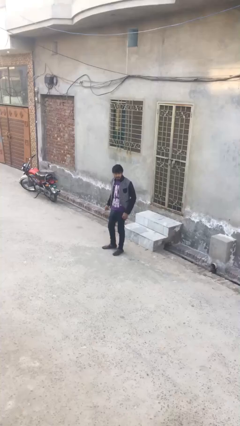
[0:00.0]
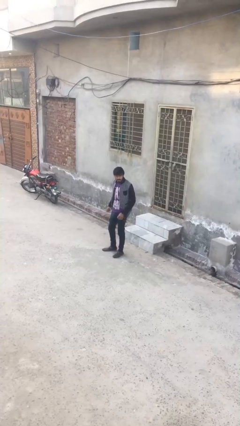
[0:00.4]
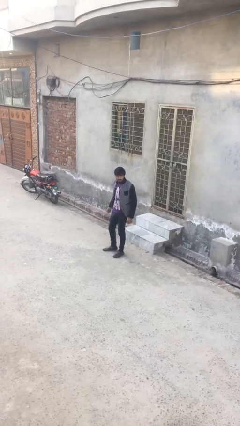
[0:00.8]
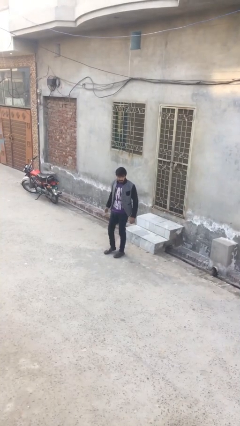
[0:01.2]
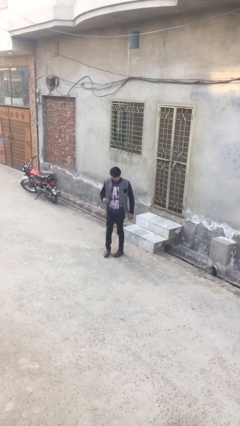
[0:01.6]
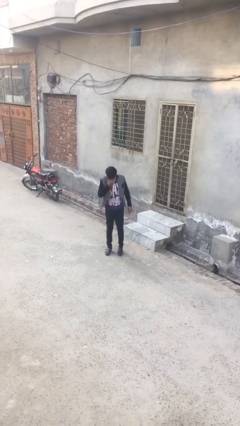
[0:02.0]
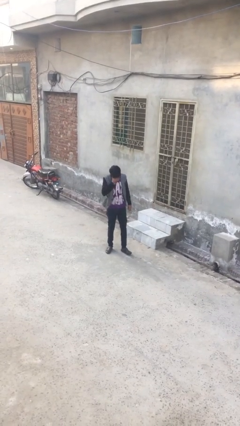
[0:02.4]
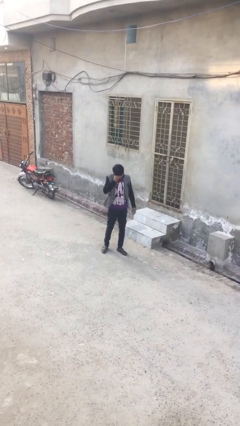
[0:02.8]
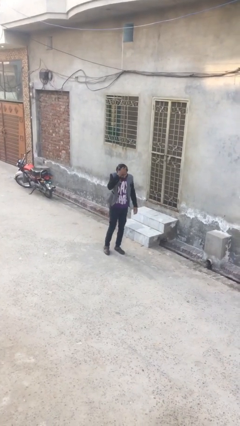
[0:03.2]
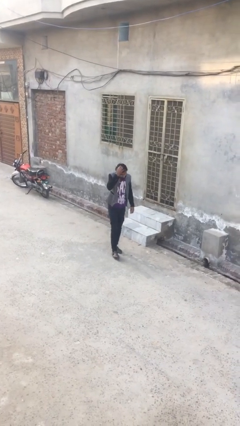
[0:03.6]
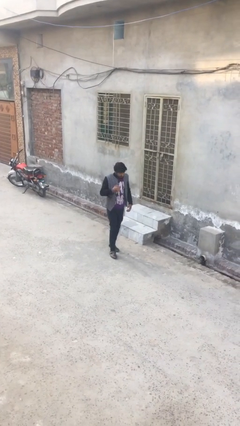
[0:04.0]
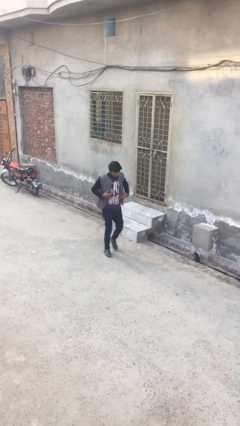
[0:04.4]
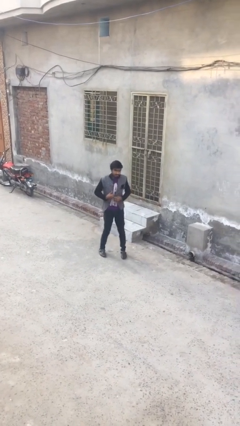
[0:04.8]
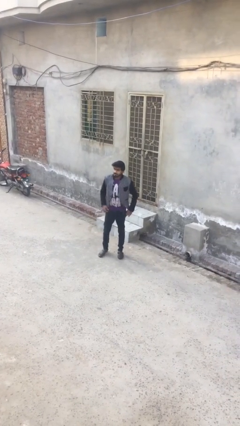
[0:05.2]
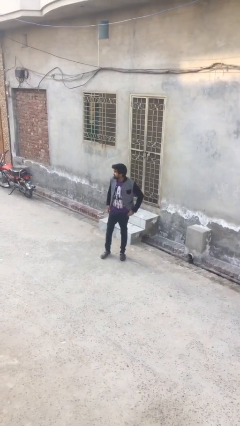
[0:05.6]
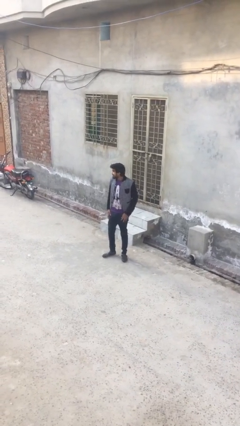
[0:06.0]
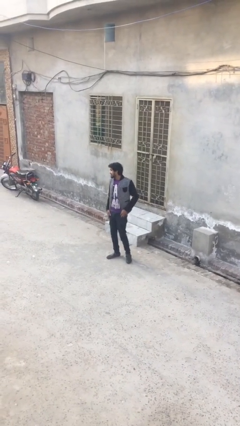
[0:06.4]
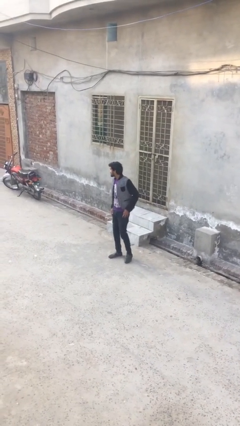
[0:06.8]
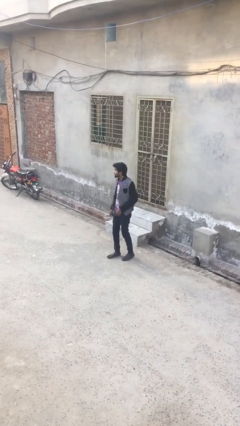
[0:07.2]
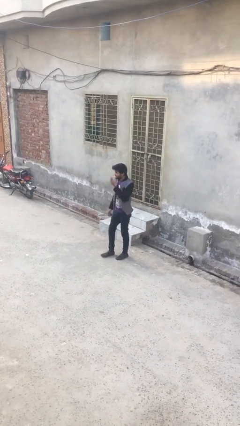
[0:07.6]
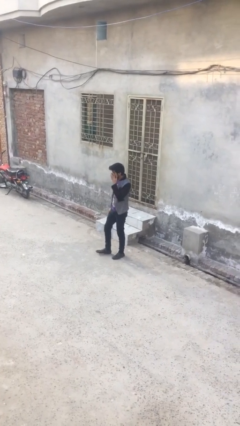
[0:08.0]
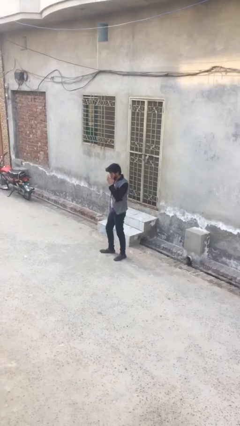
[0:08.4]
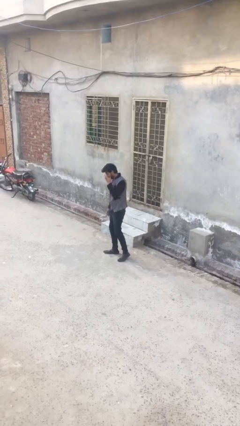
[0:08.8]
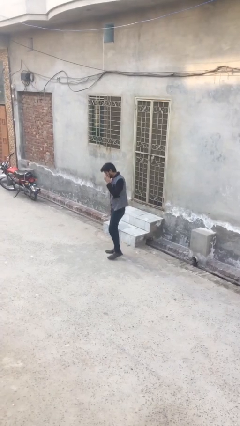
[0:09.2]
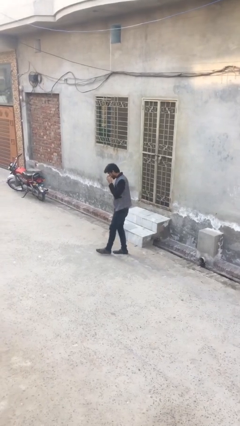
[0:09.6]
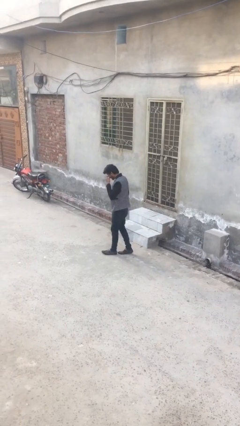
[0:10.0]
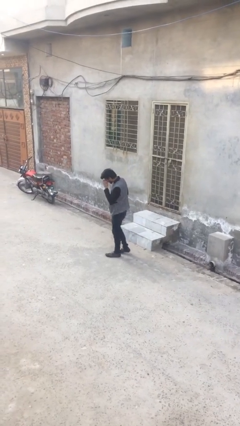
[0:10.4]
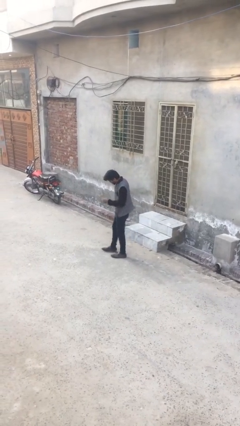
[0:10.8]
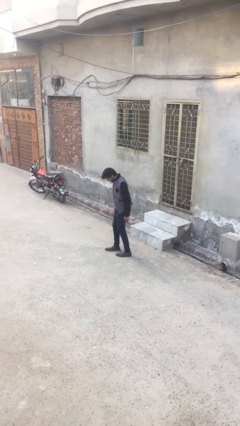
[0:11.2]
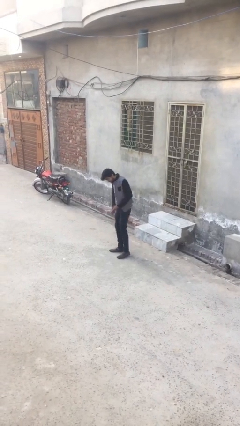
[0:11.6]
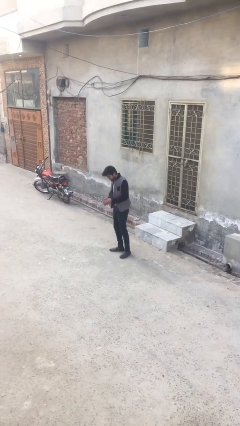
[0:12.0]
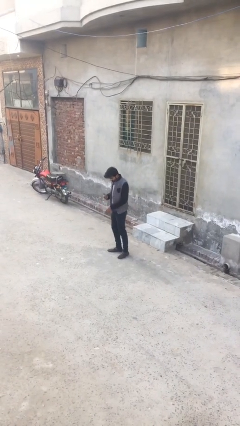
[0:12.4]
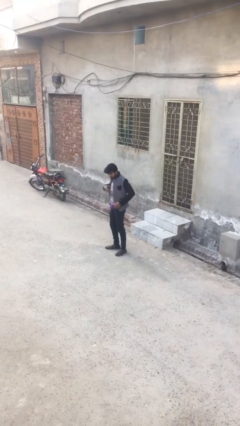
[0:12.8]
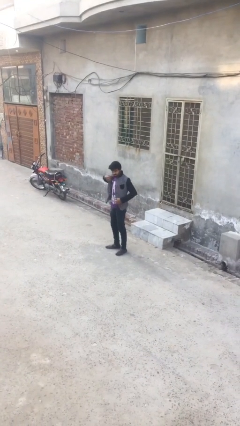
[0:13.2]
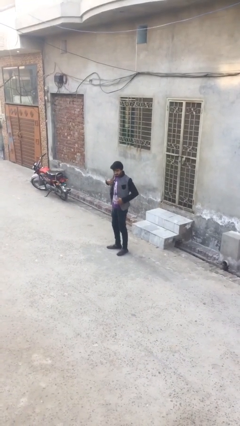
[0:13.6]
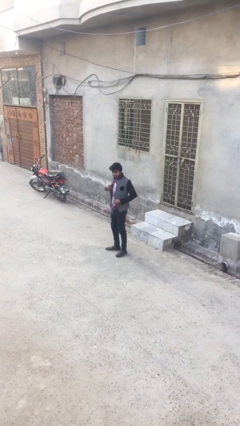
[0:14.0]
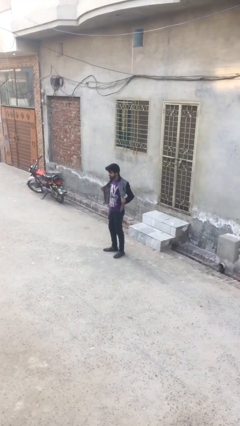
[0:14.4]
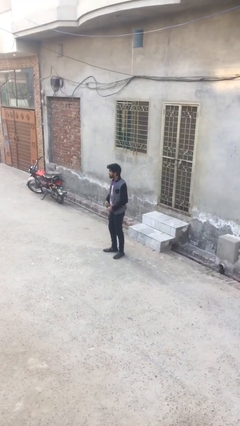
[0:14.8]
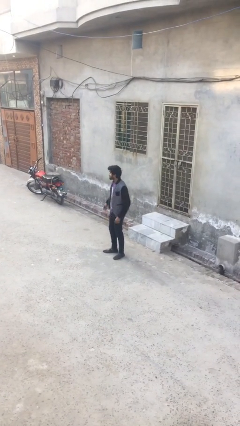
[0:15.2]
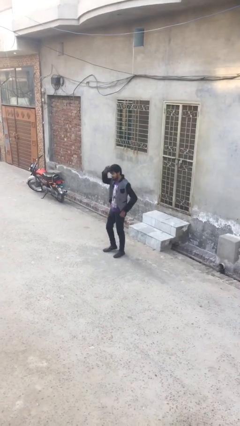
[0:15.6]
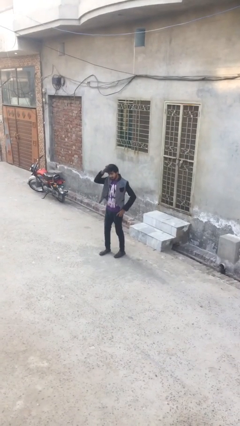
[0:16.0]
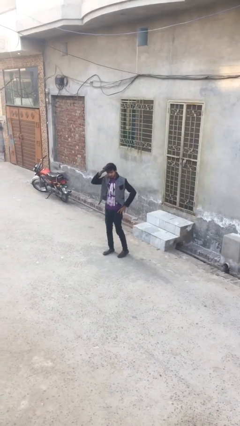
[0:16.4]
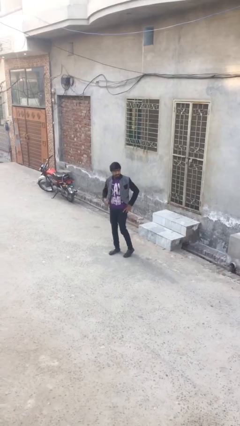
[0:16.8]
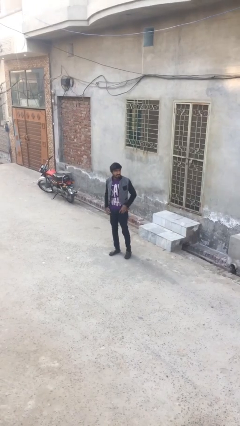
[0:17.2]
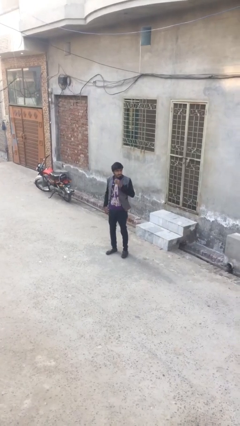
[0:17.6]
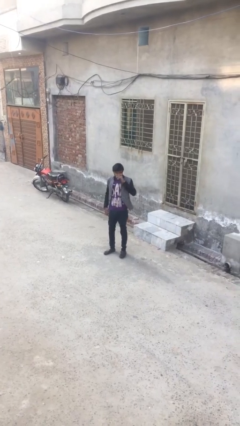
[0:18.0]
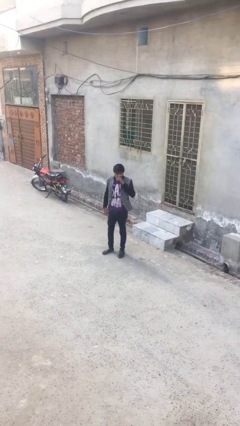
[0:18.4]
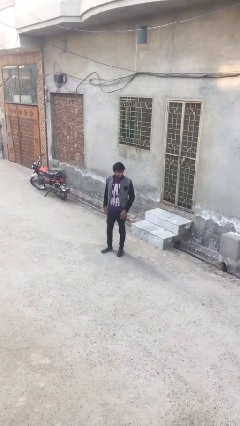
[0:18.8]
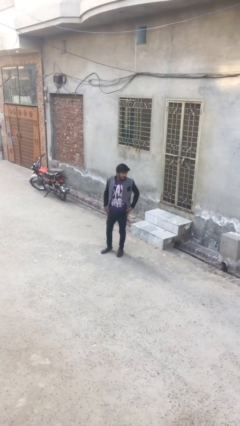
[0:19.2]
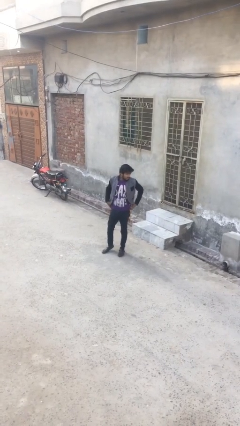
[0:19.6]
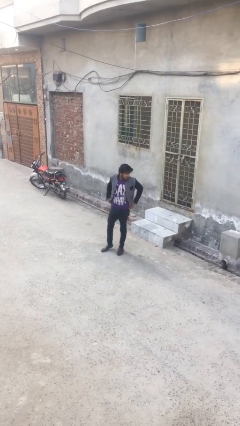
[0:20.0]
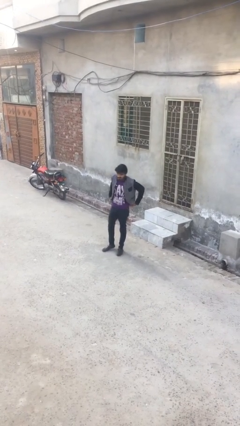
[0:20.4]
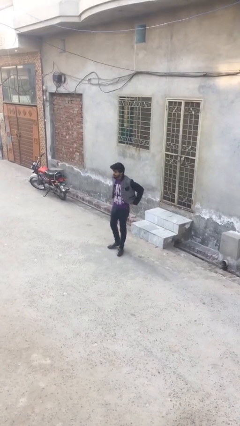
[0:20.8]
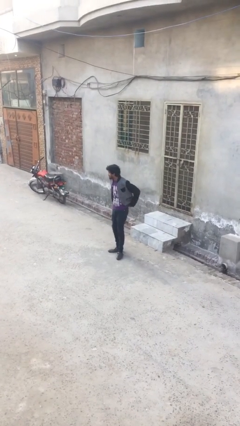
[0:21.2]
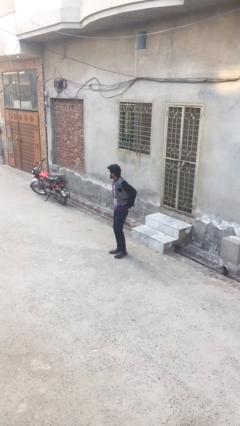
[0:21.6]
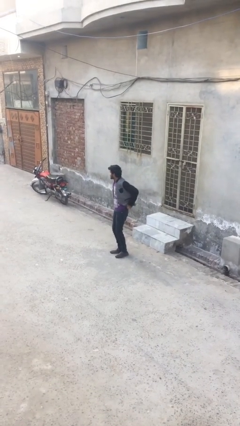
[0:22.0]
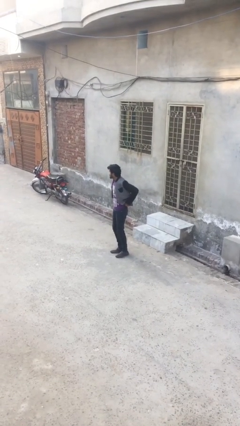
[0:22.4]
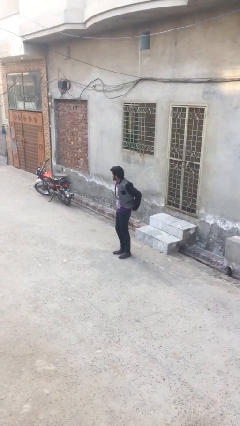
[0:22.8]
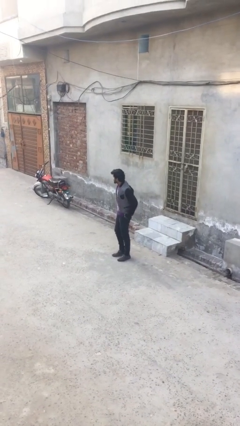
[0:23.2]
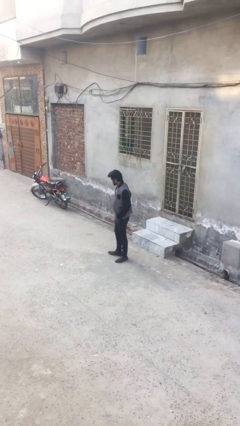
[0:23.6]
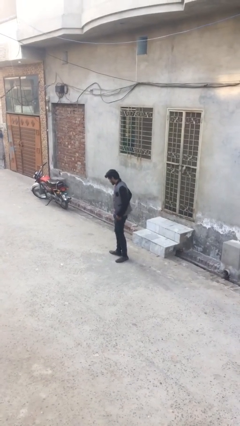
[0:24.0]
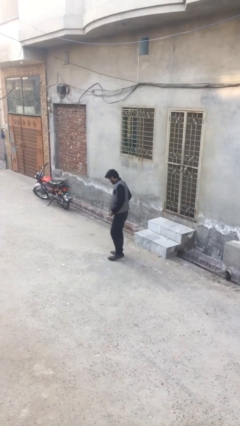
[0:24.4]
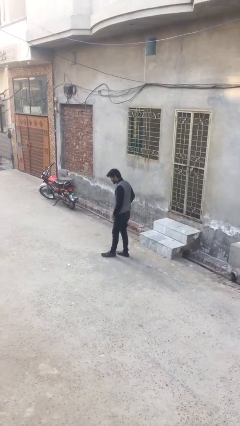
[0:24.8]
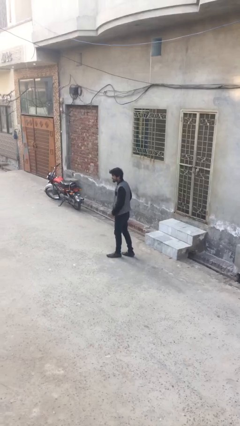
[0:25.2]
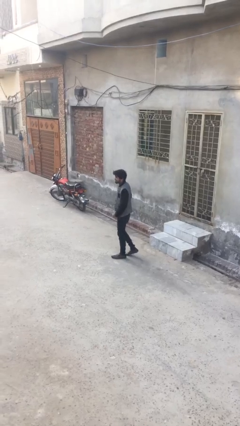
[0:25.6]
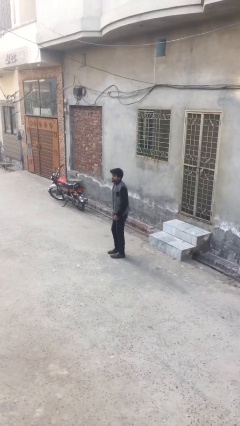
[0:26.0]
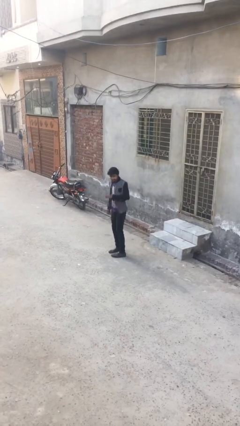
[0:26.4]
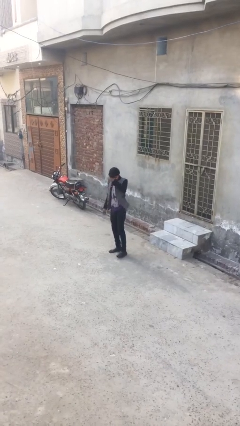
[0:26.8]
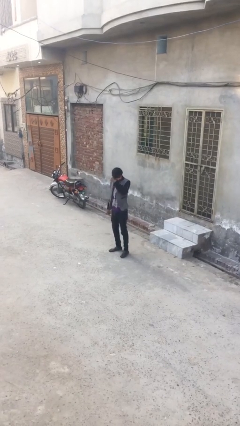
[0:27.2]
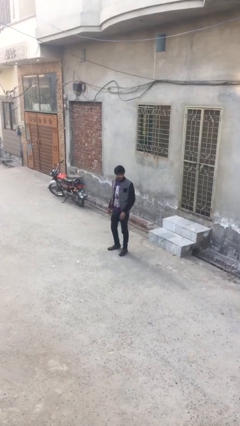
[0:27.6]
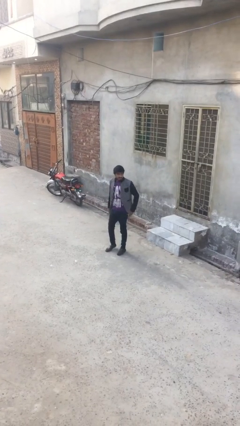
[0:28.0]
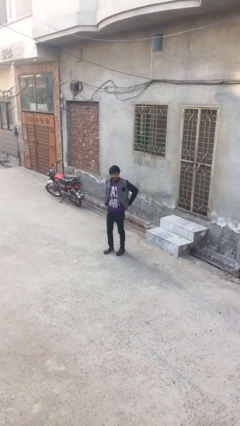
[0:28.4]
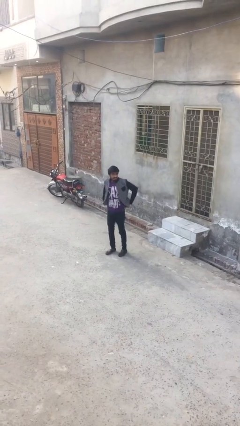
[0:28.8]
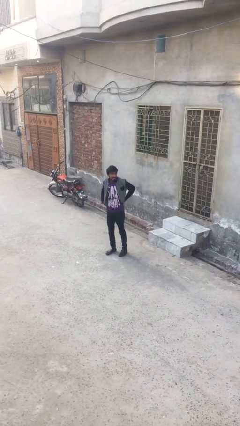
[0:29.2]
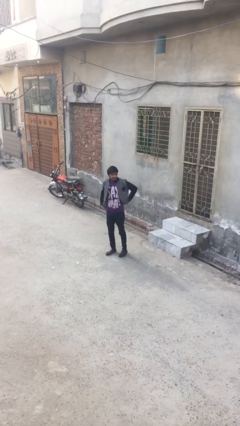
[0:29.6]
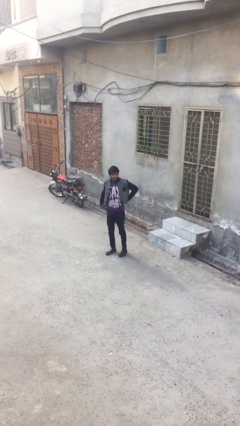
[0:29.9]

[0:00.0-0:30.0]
person walks

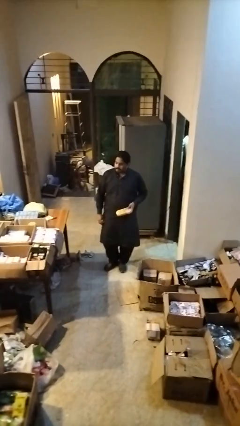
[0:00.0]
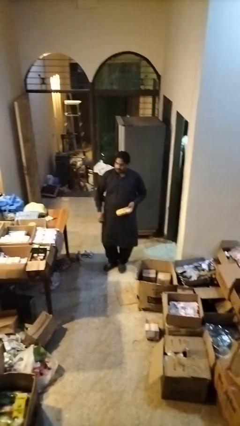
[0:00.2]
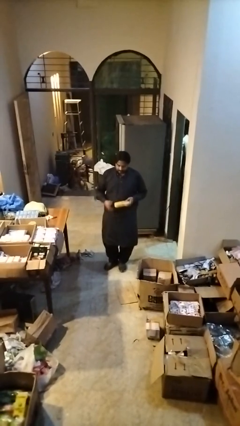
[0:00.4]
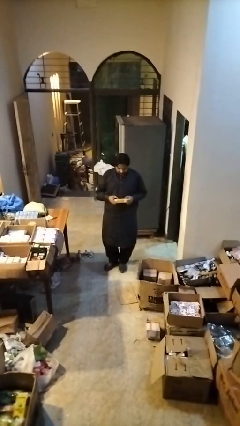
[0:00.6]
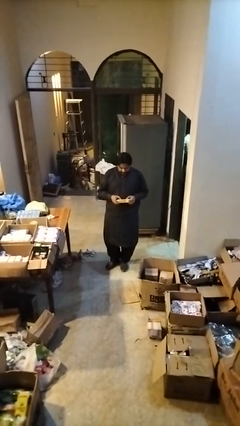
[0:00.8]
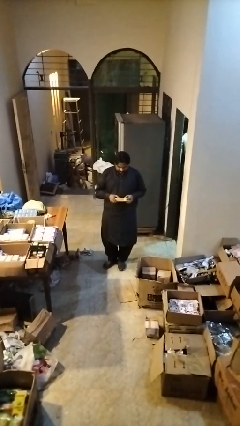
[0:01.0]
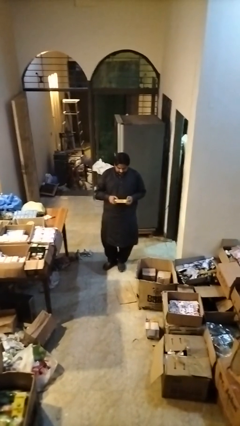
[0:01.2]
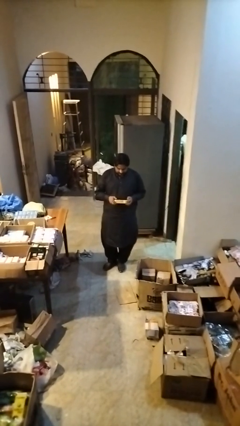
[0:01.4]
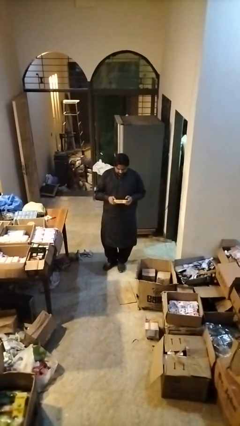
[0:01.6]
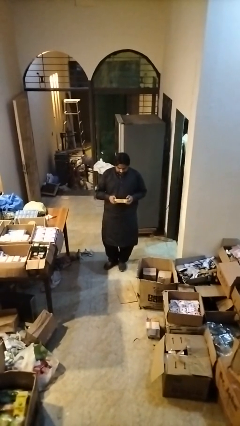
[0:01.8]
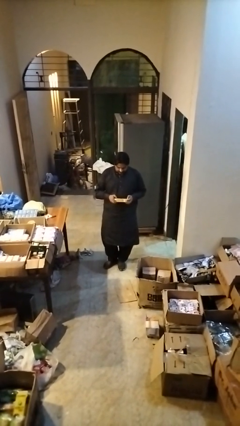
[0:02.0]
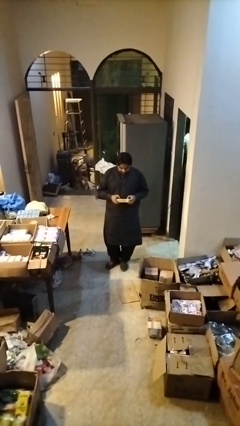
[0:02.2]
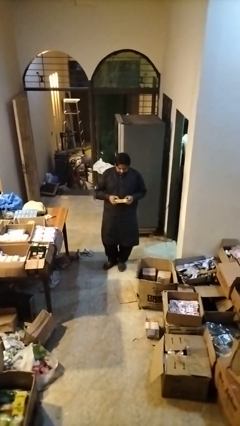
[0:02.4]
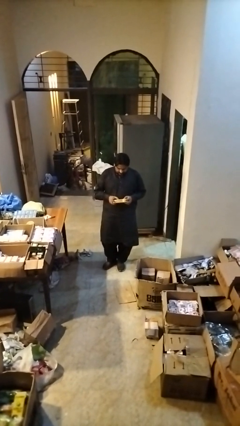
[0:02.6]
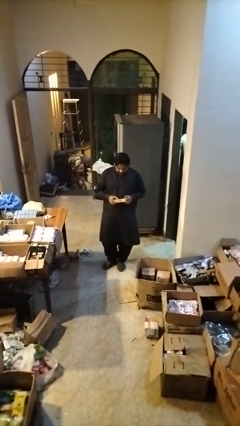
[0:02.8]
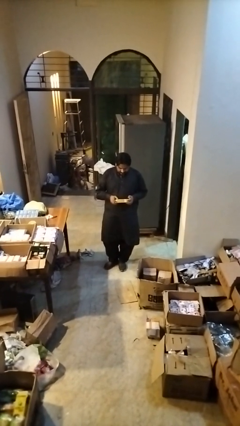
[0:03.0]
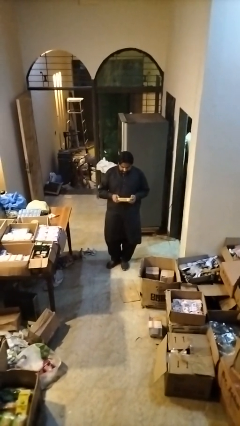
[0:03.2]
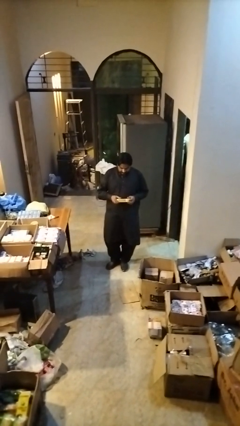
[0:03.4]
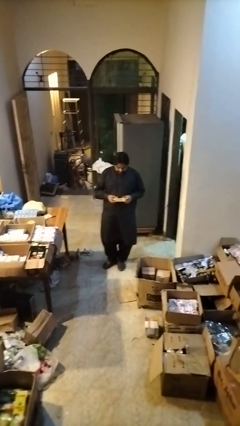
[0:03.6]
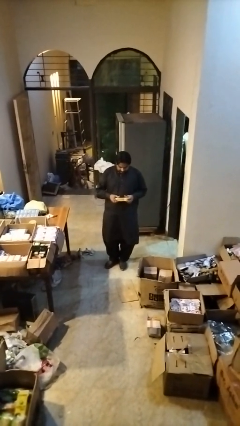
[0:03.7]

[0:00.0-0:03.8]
person interacts with handheld game
